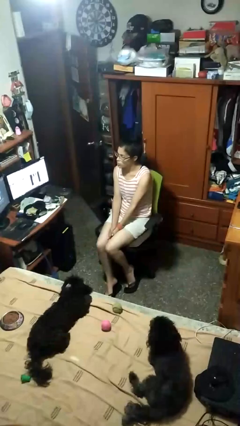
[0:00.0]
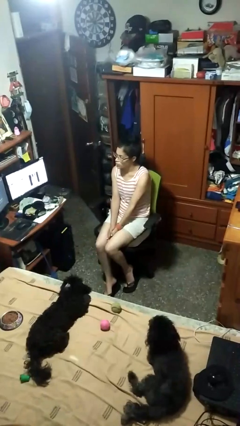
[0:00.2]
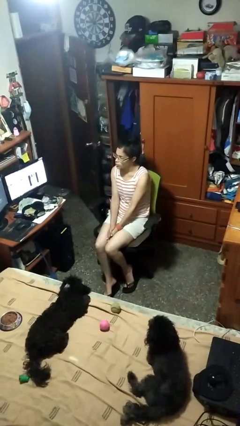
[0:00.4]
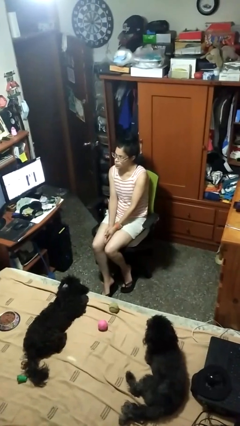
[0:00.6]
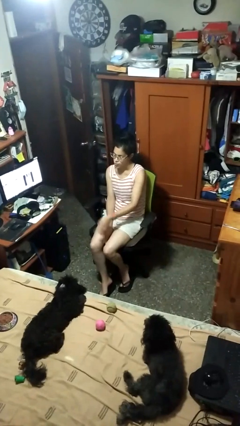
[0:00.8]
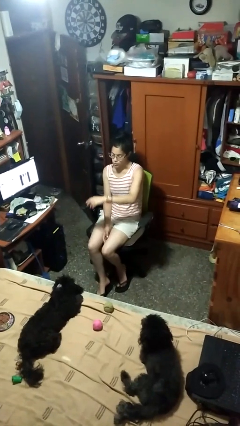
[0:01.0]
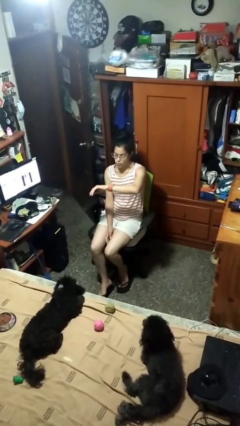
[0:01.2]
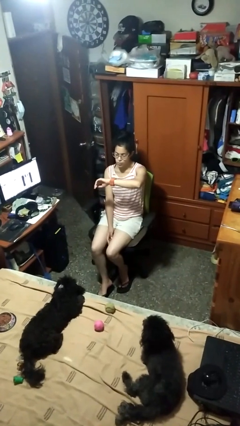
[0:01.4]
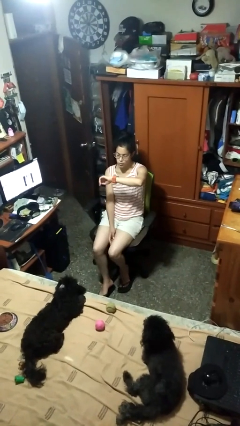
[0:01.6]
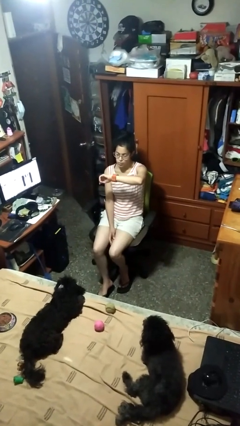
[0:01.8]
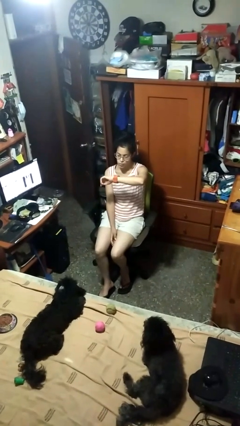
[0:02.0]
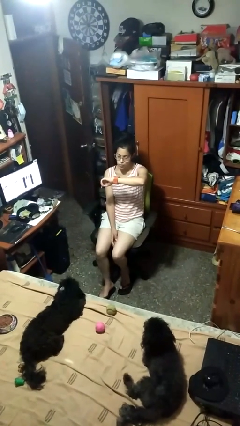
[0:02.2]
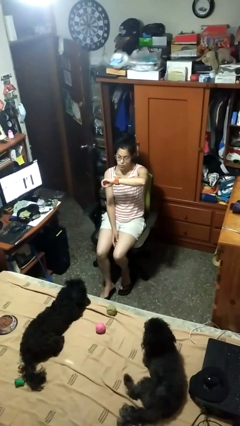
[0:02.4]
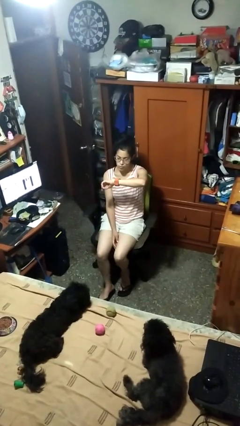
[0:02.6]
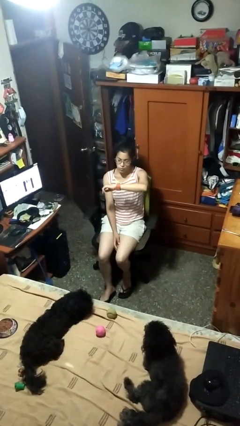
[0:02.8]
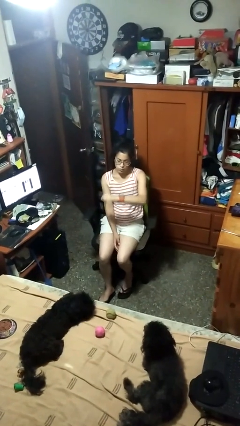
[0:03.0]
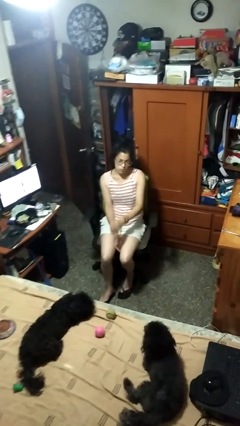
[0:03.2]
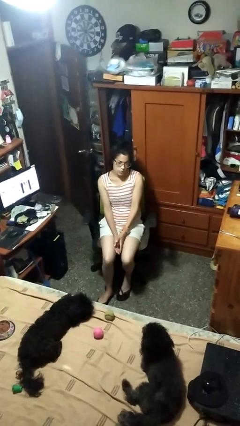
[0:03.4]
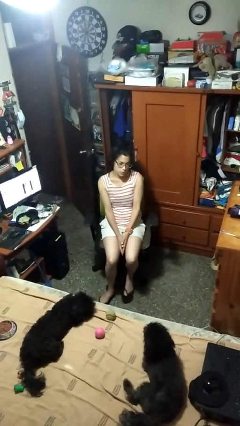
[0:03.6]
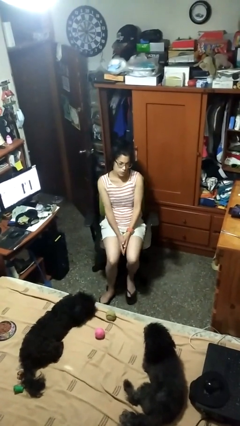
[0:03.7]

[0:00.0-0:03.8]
person looks at wristwatch

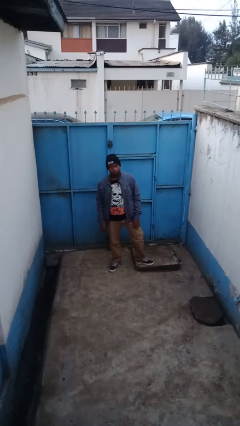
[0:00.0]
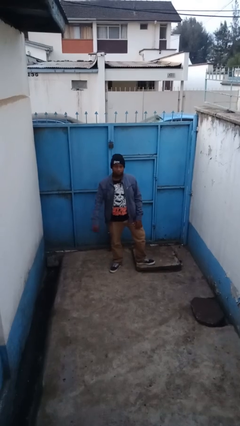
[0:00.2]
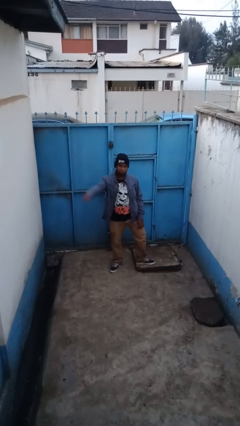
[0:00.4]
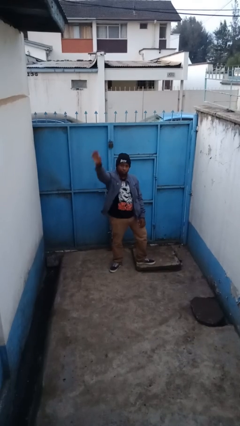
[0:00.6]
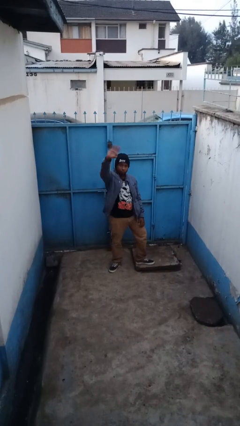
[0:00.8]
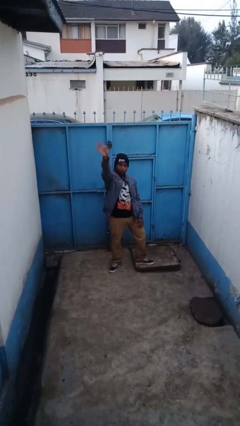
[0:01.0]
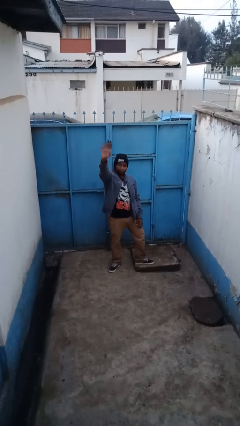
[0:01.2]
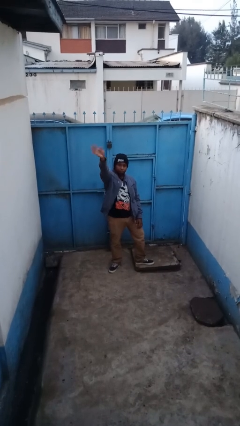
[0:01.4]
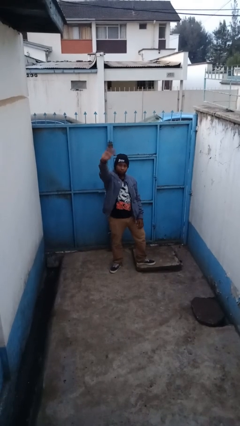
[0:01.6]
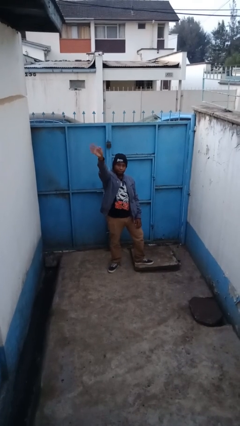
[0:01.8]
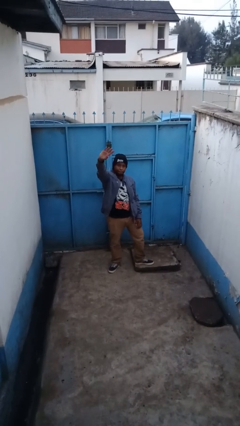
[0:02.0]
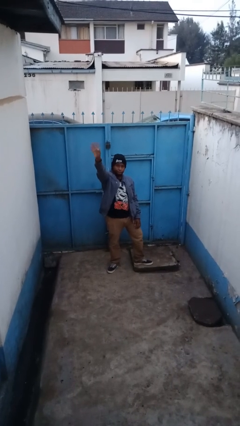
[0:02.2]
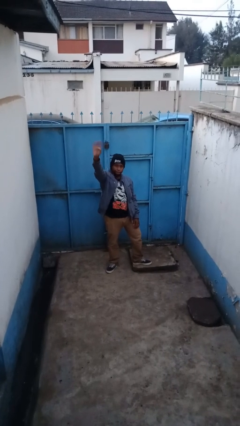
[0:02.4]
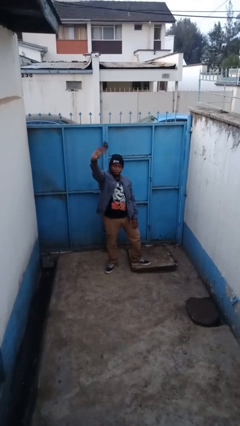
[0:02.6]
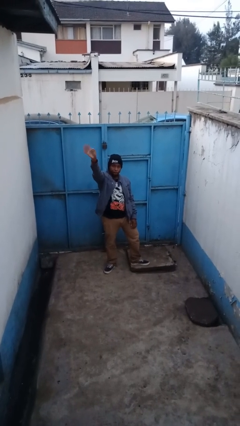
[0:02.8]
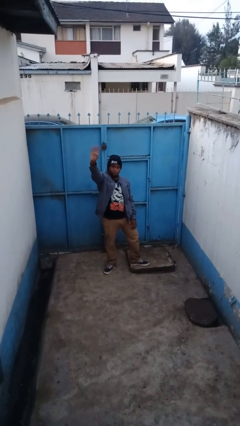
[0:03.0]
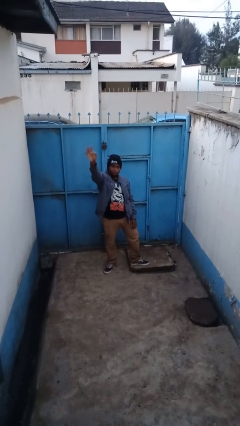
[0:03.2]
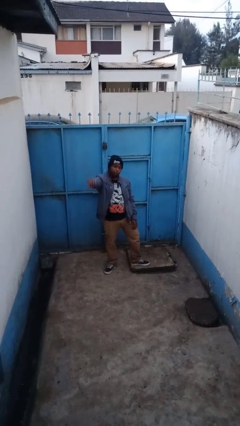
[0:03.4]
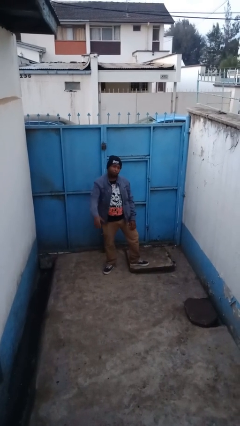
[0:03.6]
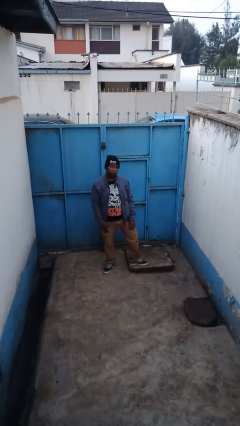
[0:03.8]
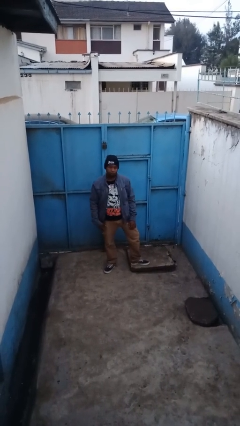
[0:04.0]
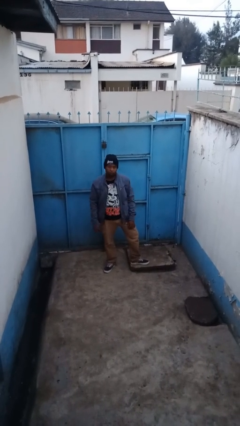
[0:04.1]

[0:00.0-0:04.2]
person waves at person

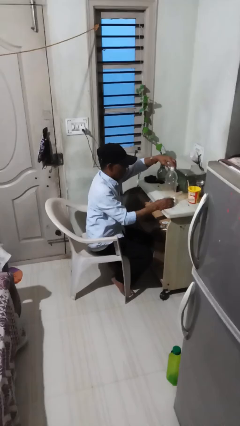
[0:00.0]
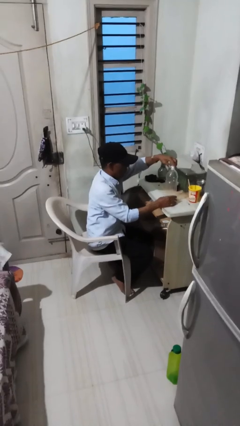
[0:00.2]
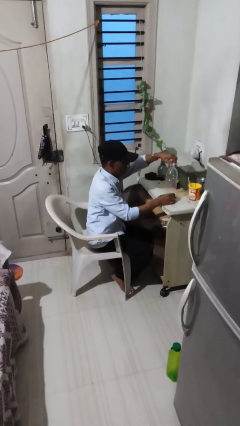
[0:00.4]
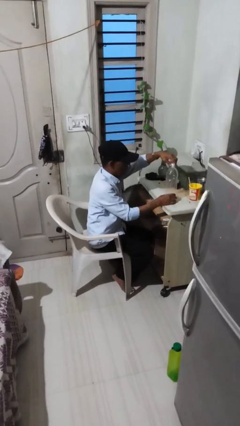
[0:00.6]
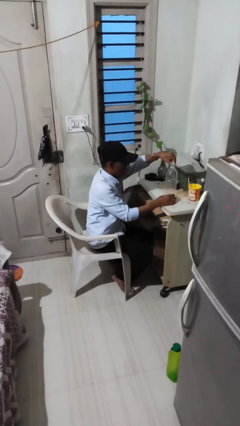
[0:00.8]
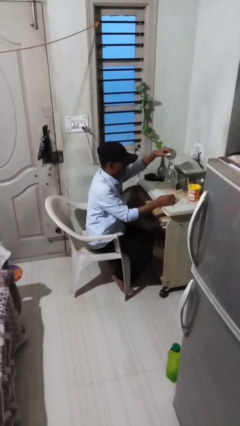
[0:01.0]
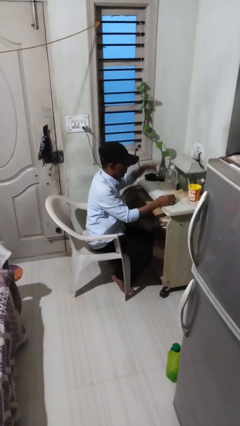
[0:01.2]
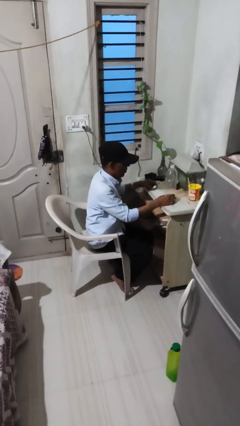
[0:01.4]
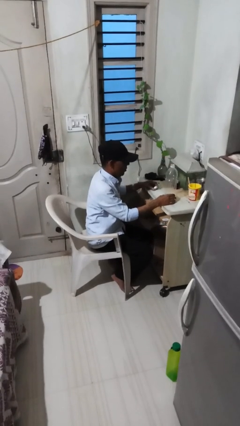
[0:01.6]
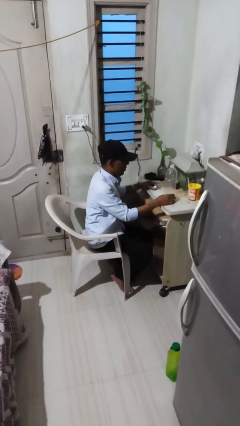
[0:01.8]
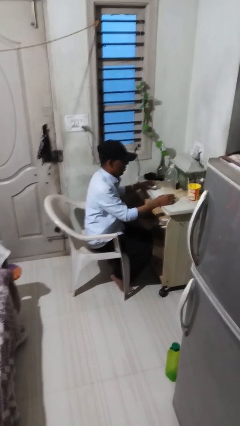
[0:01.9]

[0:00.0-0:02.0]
person unscrews lid from bottle

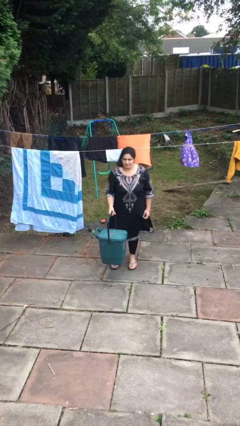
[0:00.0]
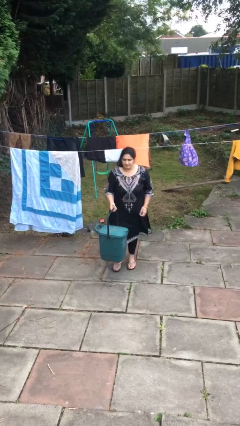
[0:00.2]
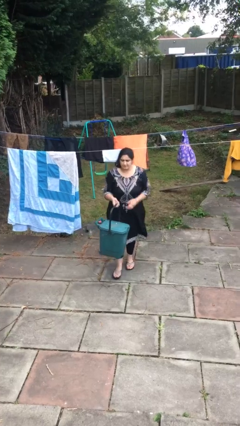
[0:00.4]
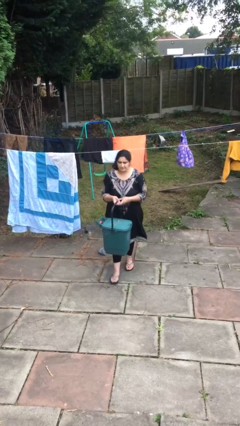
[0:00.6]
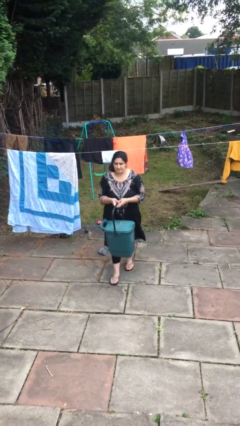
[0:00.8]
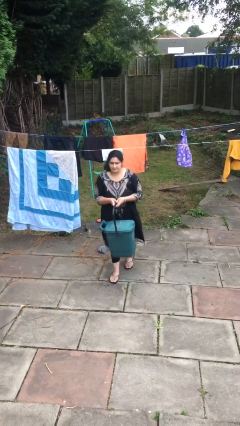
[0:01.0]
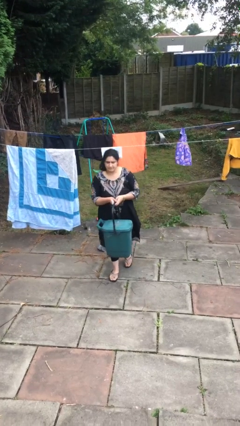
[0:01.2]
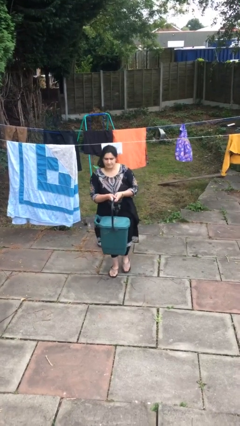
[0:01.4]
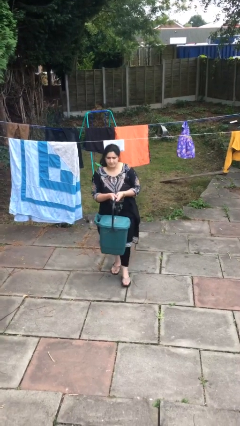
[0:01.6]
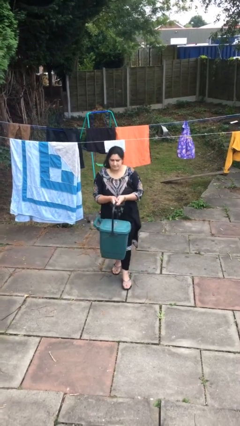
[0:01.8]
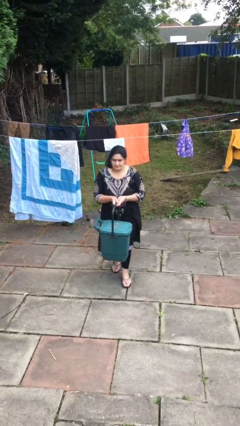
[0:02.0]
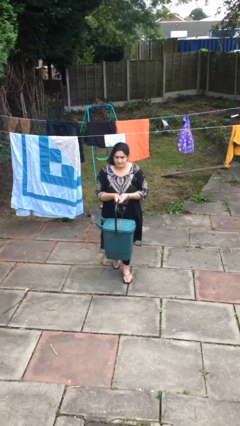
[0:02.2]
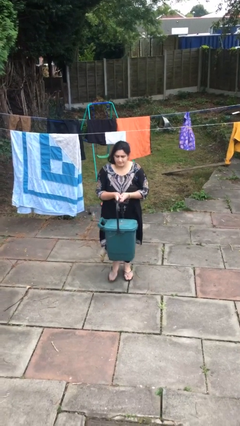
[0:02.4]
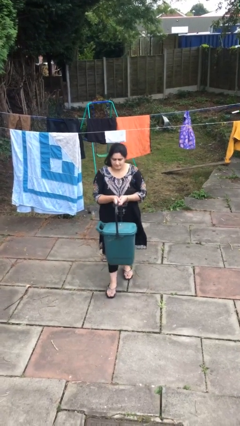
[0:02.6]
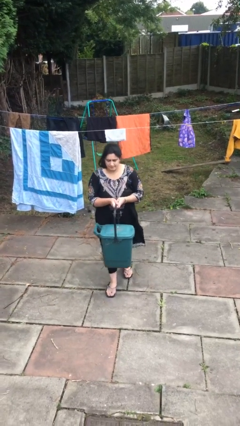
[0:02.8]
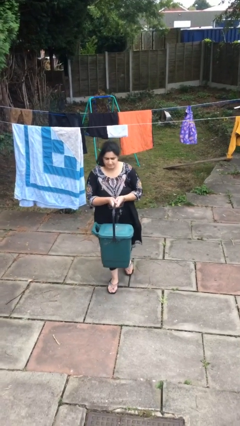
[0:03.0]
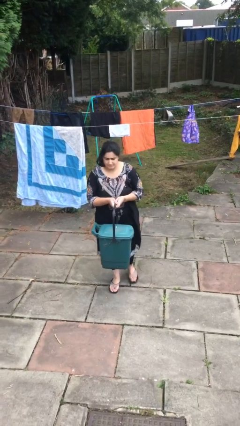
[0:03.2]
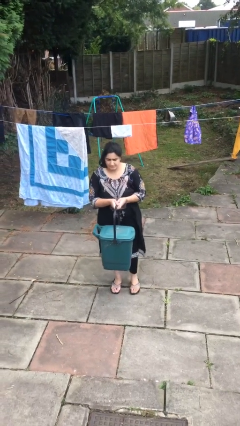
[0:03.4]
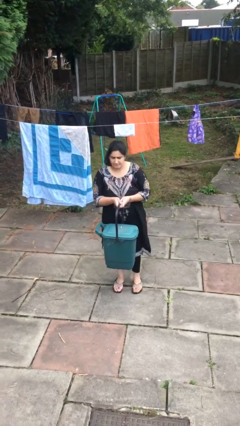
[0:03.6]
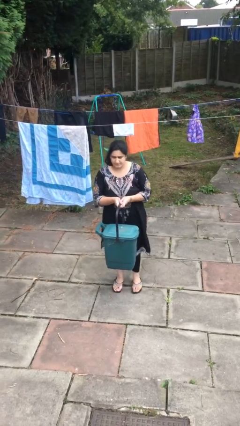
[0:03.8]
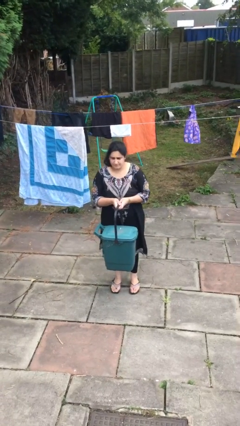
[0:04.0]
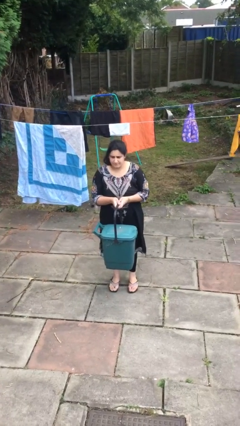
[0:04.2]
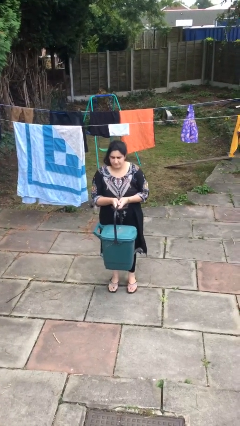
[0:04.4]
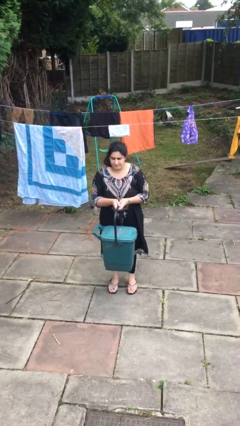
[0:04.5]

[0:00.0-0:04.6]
person carries heavy object

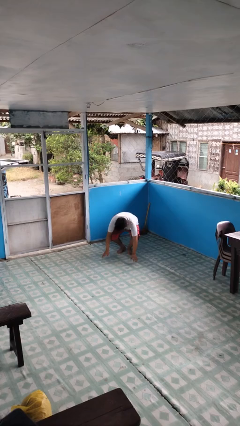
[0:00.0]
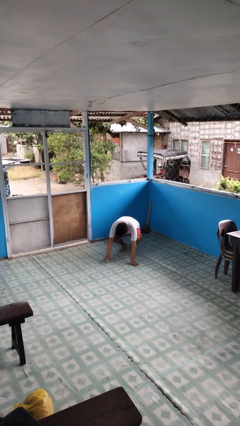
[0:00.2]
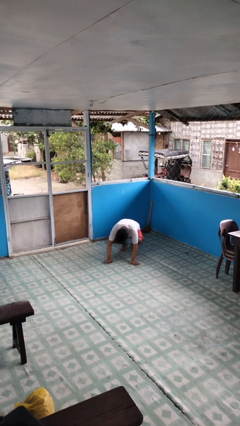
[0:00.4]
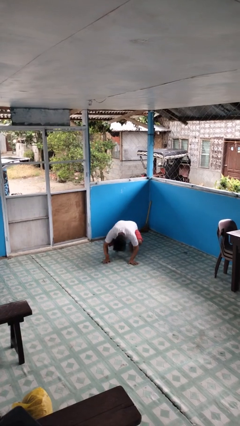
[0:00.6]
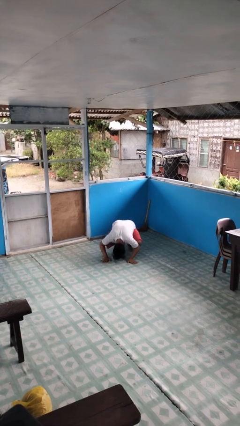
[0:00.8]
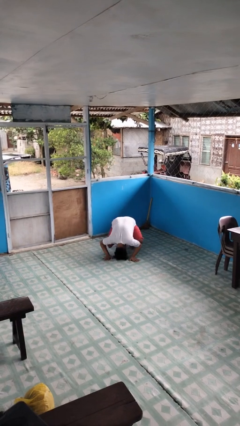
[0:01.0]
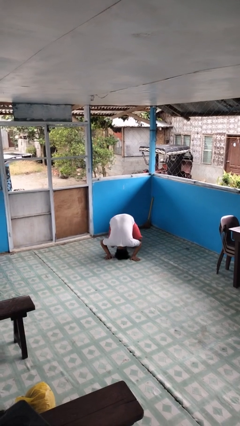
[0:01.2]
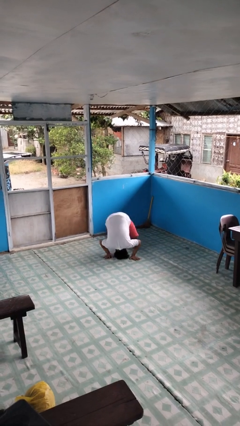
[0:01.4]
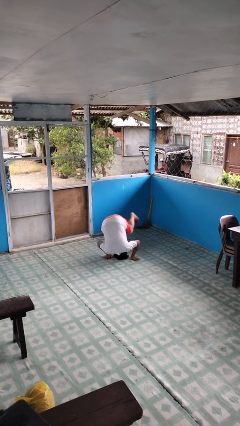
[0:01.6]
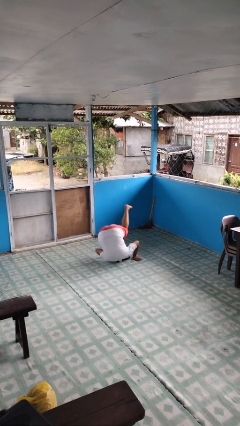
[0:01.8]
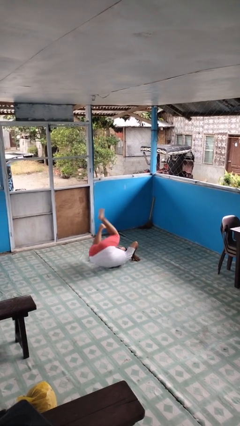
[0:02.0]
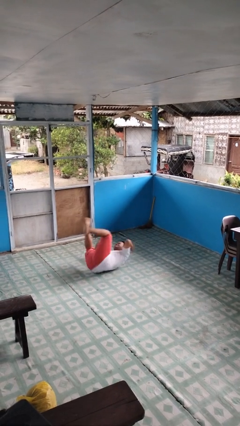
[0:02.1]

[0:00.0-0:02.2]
person somersaults
